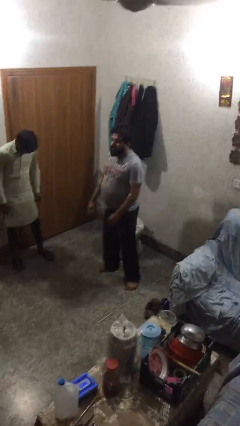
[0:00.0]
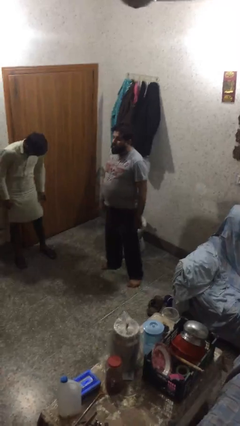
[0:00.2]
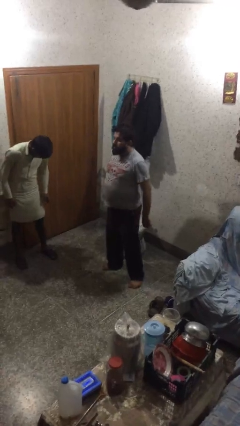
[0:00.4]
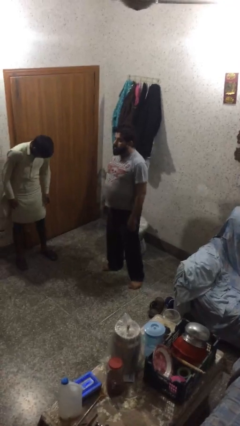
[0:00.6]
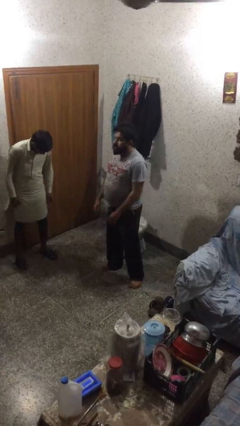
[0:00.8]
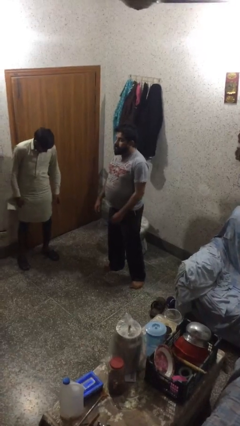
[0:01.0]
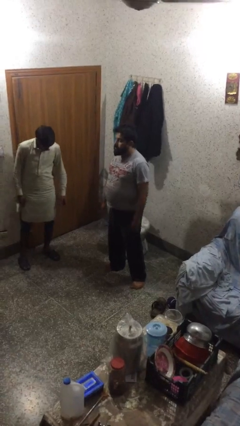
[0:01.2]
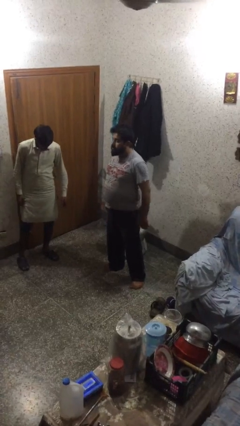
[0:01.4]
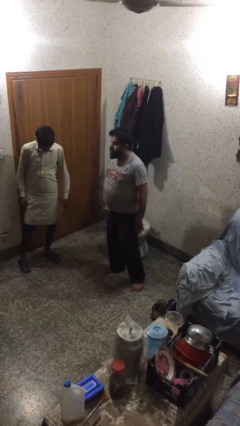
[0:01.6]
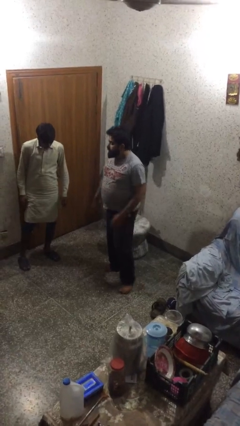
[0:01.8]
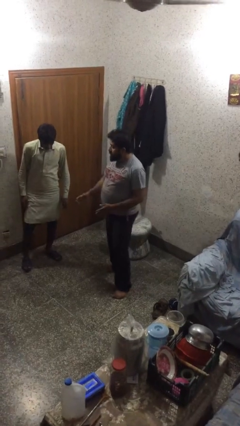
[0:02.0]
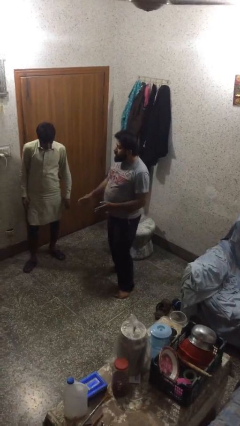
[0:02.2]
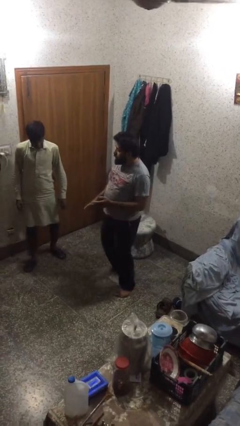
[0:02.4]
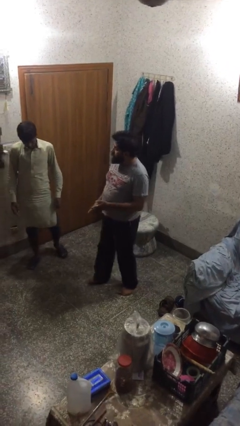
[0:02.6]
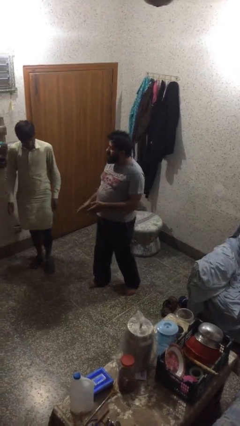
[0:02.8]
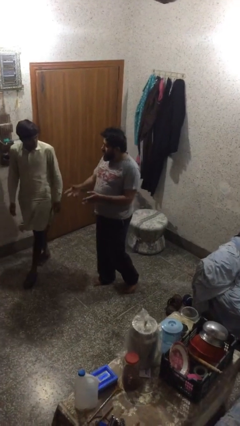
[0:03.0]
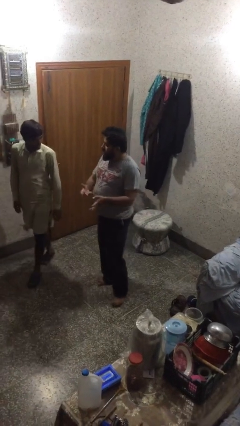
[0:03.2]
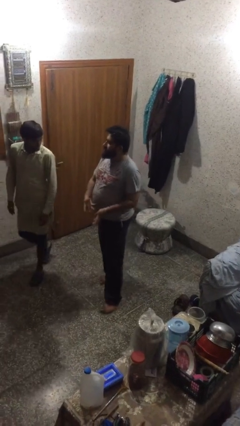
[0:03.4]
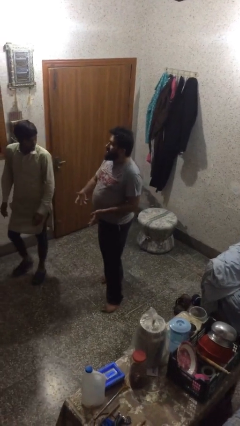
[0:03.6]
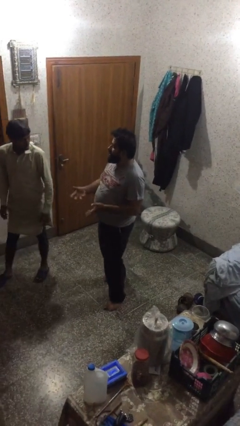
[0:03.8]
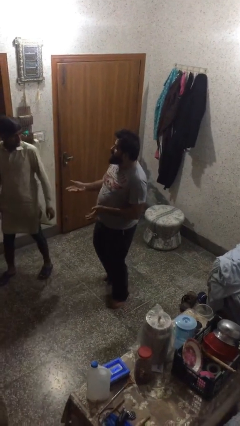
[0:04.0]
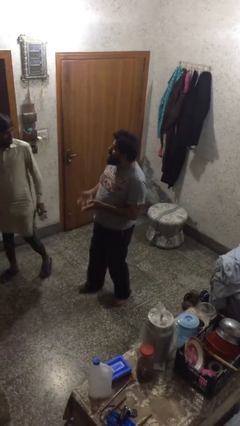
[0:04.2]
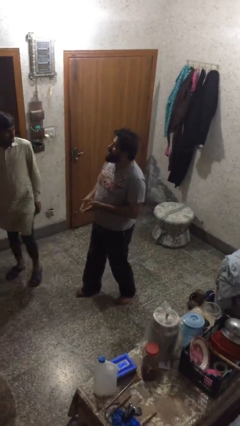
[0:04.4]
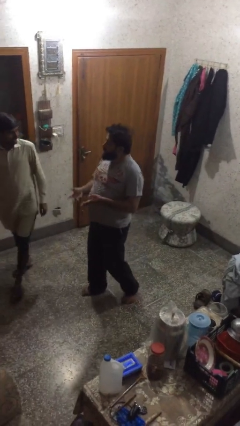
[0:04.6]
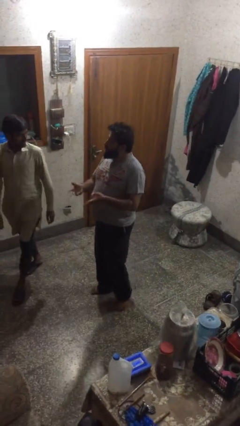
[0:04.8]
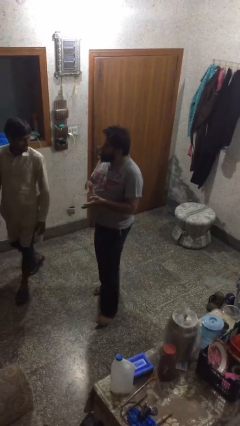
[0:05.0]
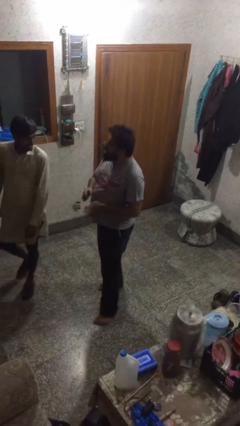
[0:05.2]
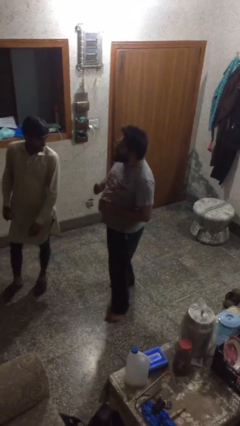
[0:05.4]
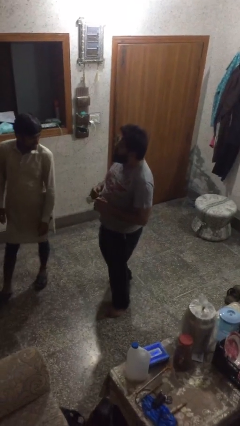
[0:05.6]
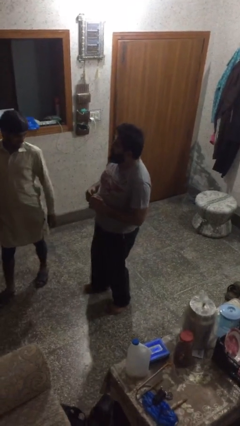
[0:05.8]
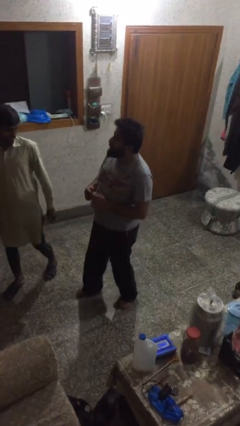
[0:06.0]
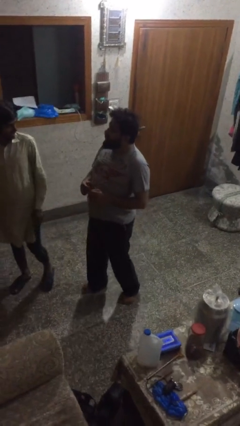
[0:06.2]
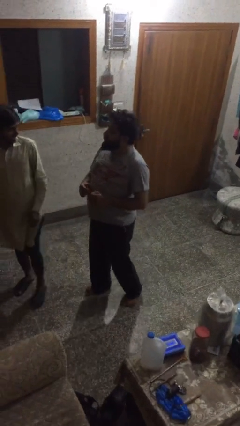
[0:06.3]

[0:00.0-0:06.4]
person talks to person

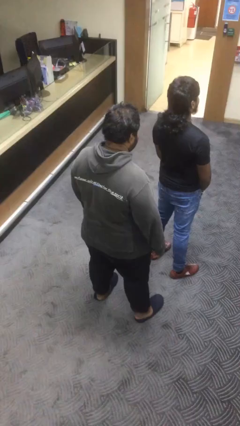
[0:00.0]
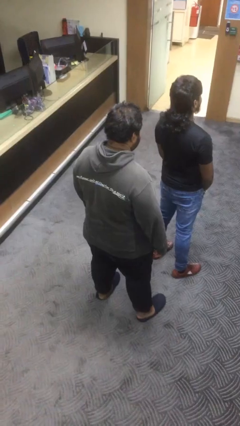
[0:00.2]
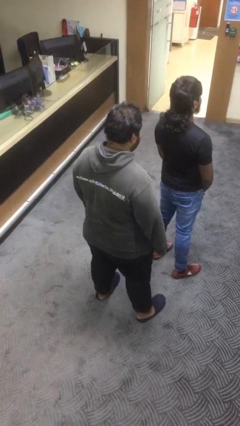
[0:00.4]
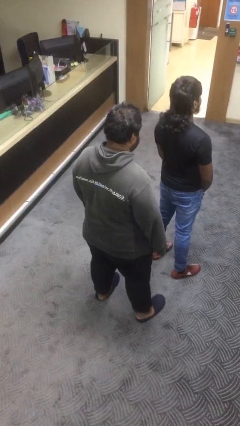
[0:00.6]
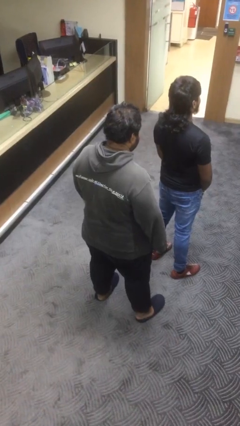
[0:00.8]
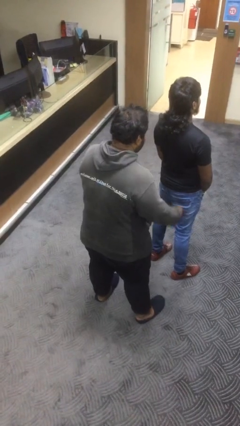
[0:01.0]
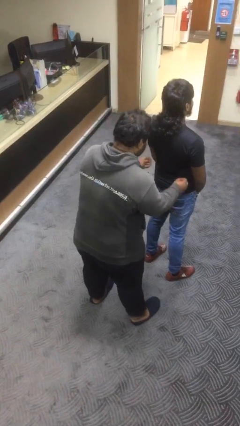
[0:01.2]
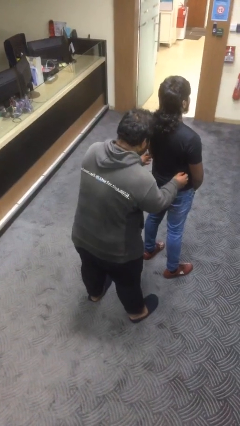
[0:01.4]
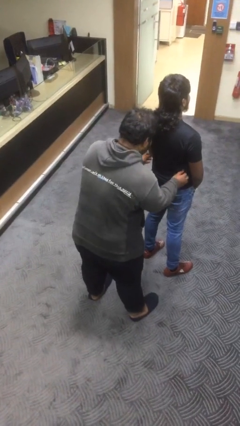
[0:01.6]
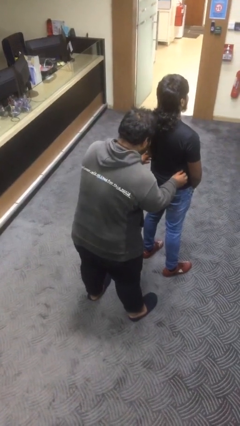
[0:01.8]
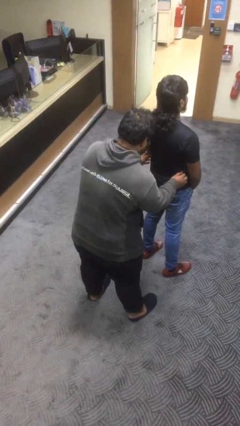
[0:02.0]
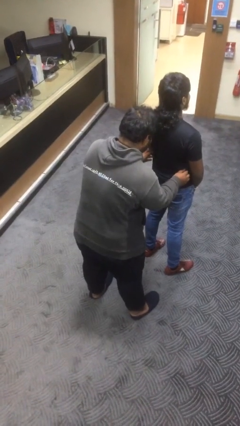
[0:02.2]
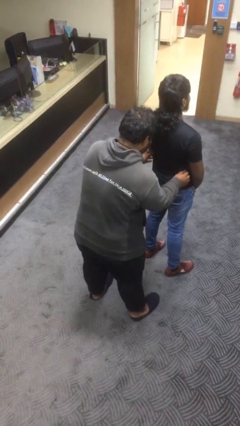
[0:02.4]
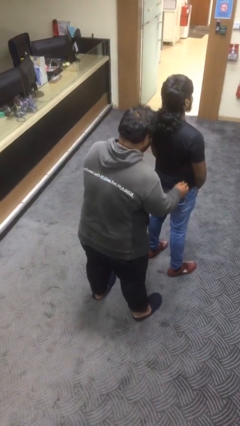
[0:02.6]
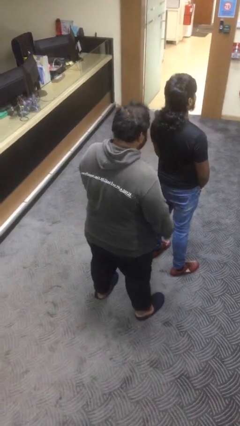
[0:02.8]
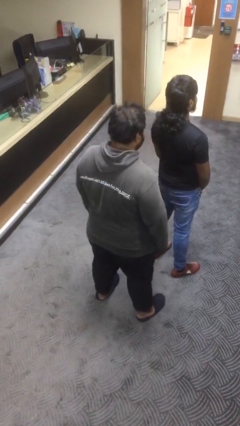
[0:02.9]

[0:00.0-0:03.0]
person tickles person

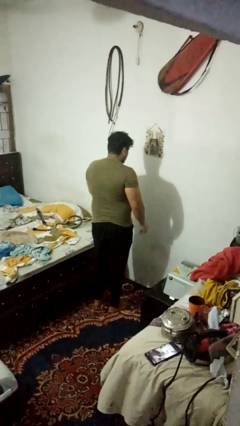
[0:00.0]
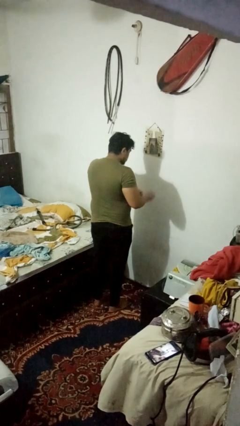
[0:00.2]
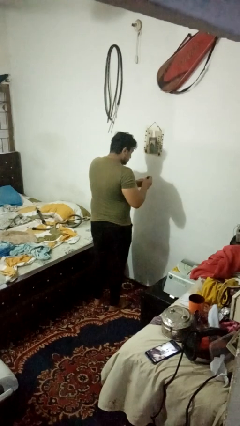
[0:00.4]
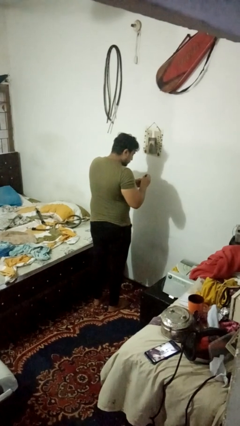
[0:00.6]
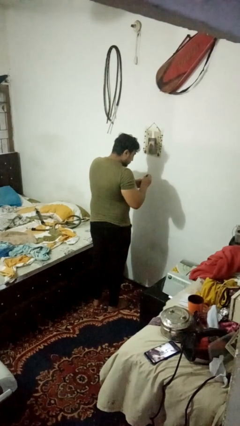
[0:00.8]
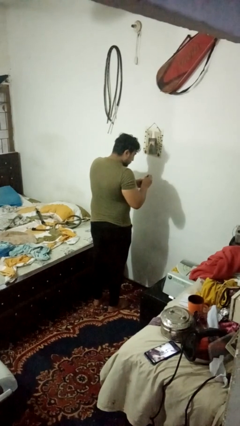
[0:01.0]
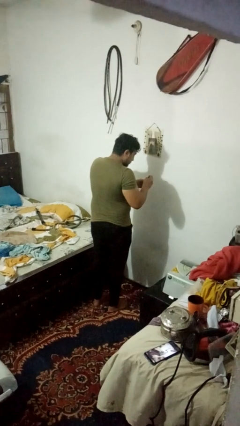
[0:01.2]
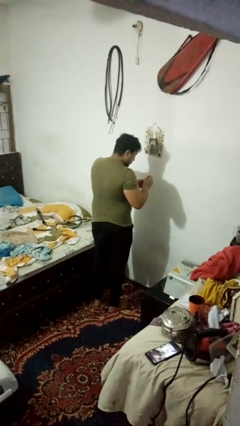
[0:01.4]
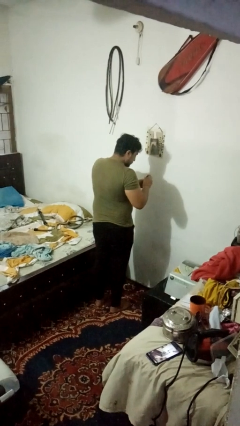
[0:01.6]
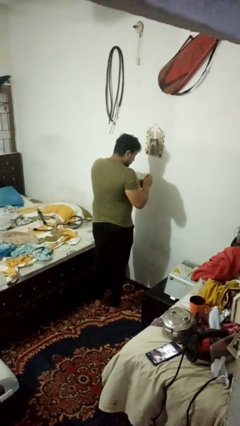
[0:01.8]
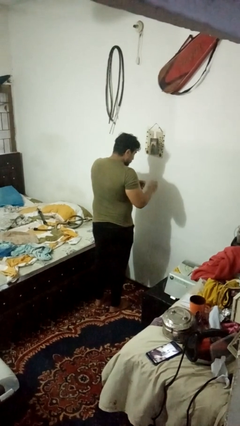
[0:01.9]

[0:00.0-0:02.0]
person paints fingernails

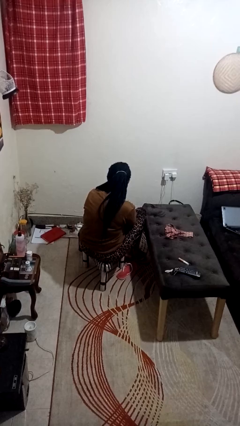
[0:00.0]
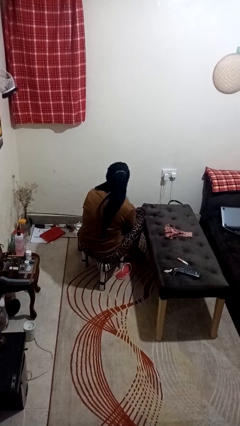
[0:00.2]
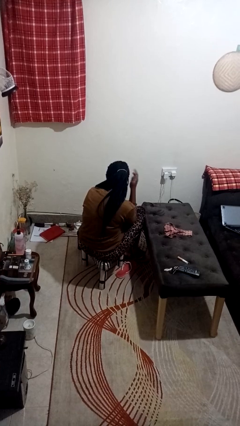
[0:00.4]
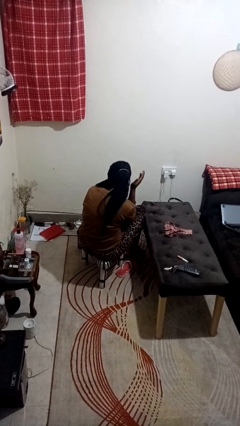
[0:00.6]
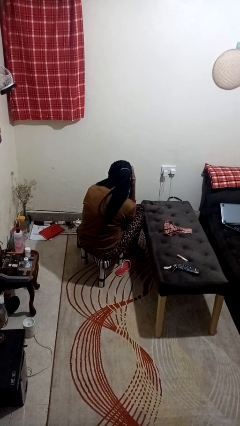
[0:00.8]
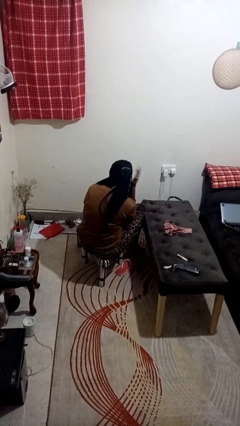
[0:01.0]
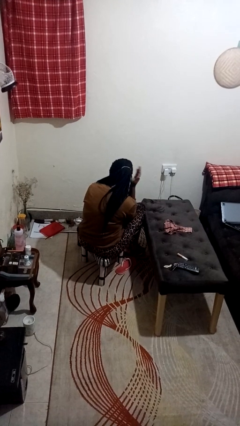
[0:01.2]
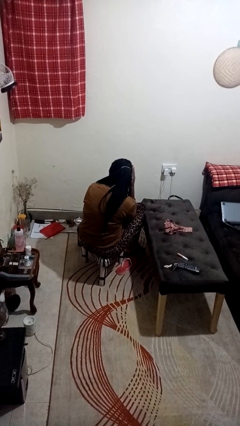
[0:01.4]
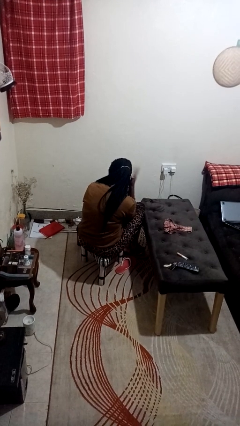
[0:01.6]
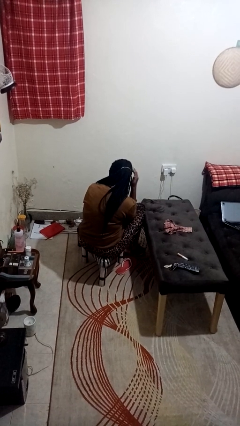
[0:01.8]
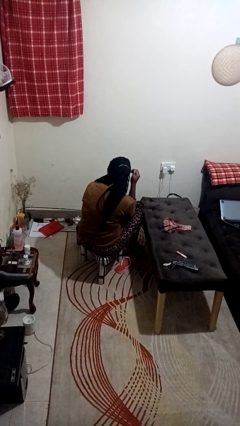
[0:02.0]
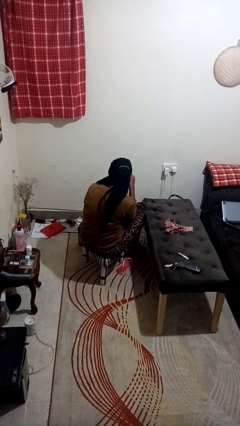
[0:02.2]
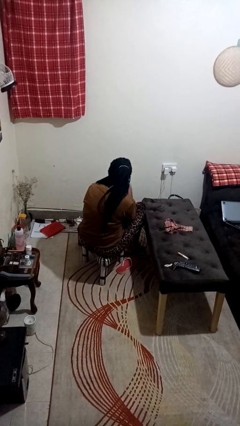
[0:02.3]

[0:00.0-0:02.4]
person pats head

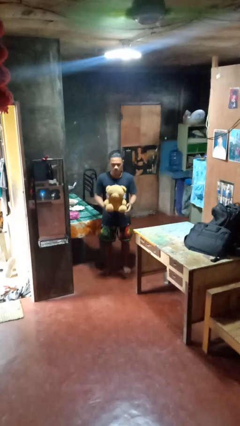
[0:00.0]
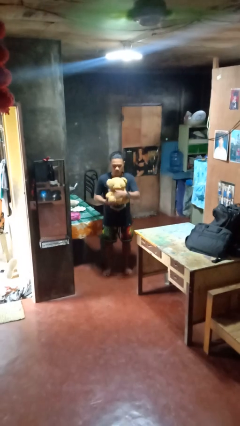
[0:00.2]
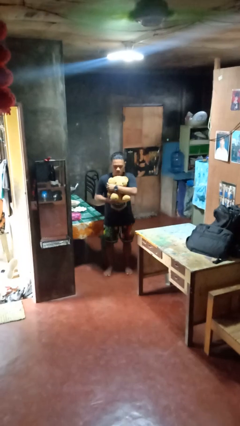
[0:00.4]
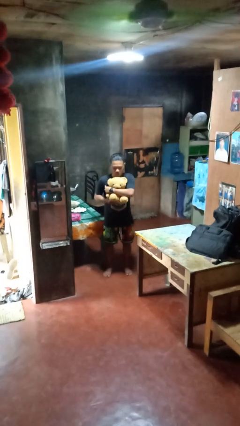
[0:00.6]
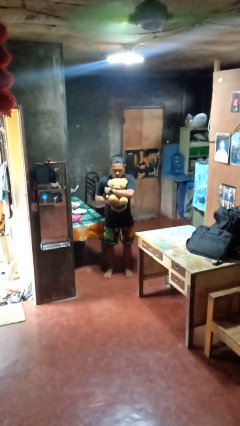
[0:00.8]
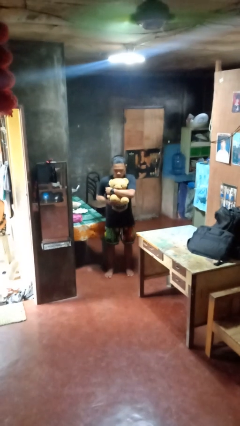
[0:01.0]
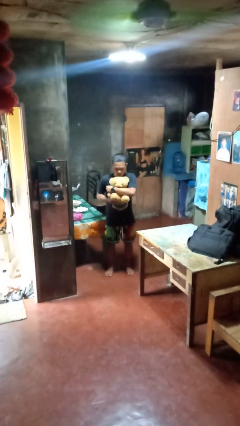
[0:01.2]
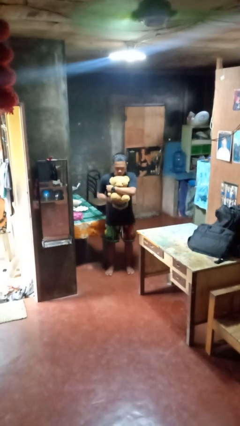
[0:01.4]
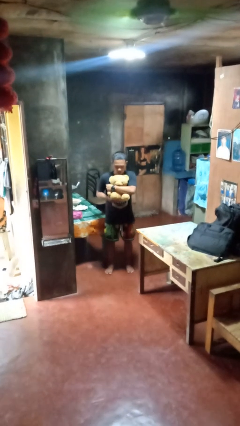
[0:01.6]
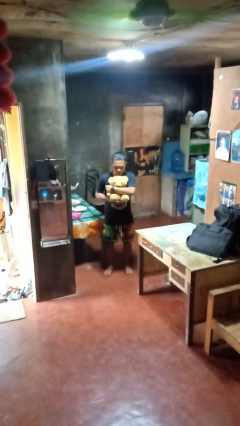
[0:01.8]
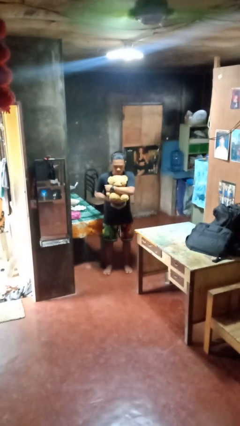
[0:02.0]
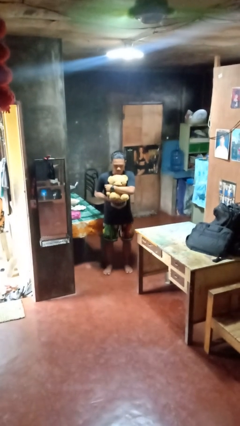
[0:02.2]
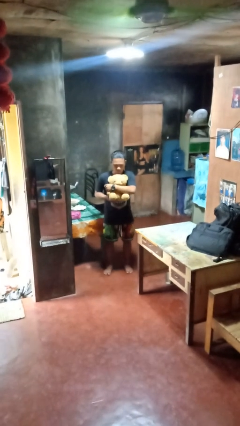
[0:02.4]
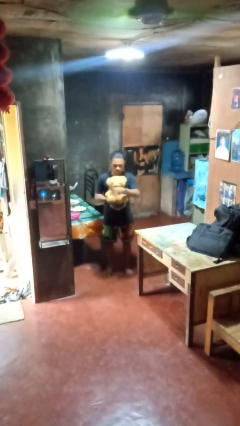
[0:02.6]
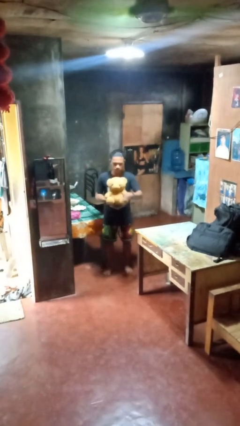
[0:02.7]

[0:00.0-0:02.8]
person hugs stuffed animal

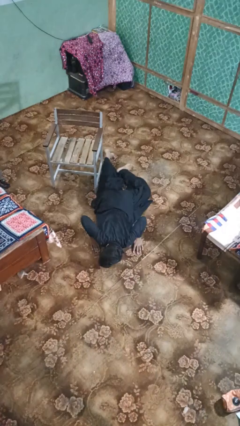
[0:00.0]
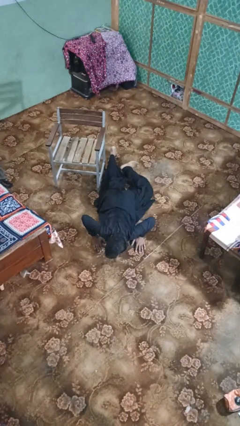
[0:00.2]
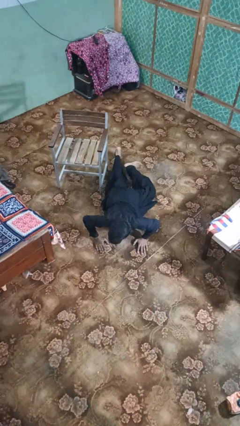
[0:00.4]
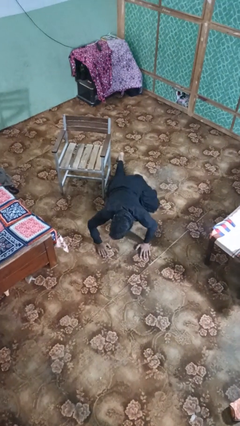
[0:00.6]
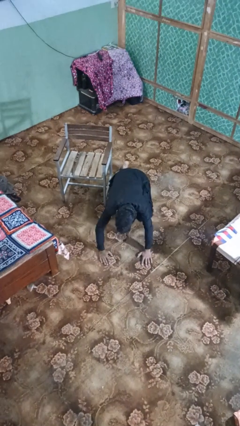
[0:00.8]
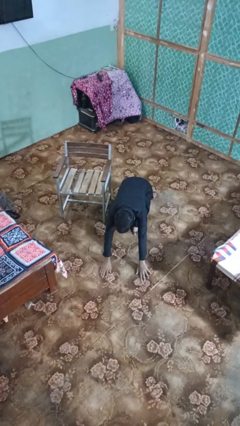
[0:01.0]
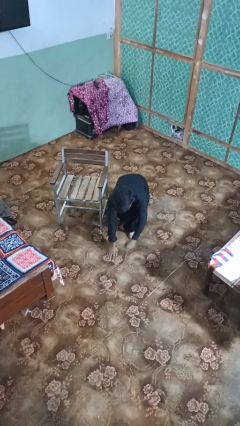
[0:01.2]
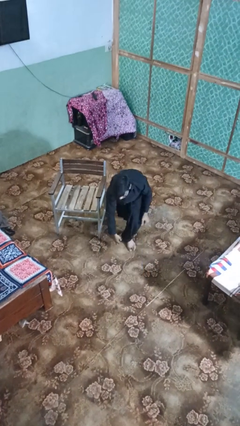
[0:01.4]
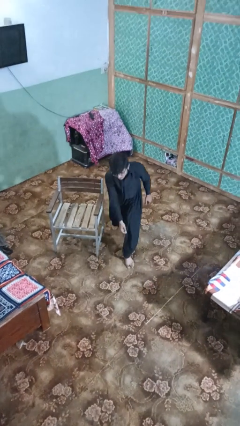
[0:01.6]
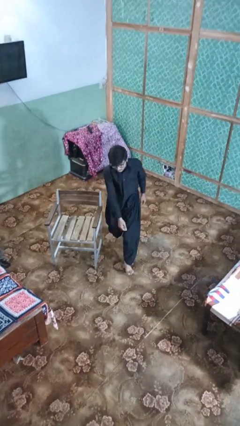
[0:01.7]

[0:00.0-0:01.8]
person stands up from floor
